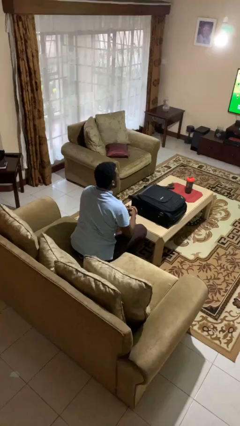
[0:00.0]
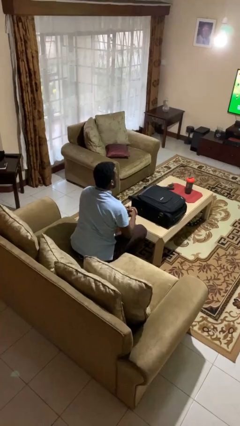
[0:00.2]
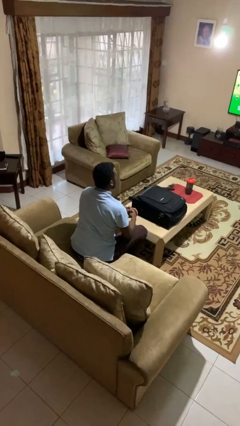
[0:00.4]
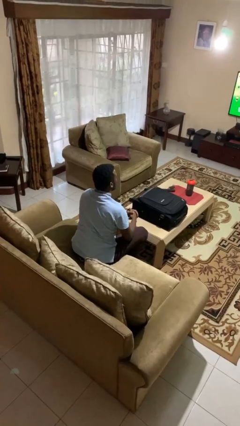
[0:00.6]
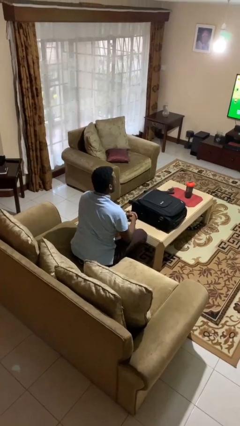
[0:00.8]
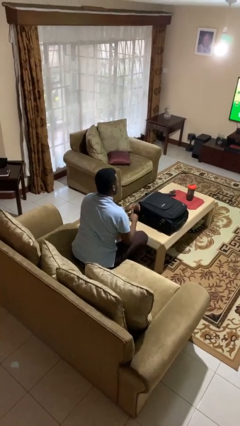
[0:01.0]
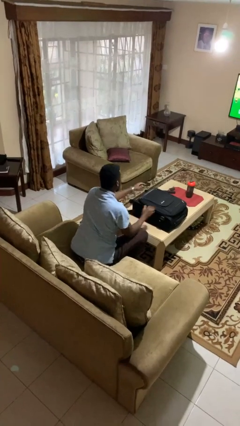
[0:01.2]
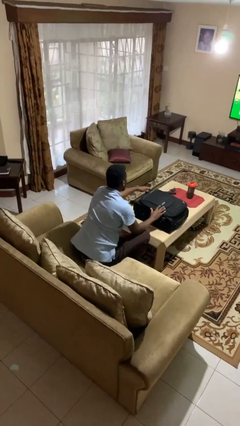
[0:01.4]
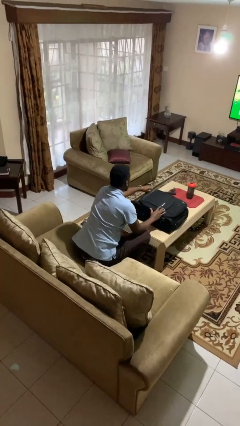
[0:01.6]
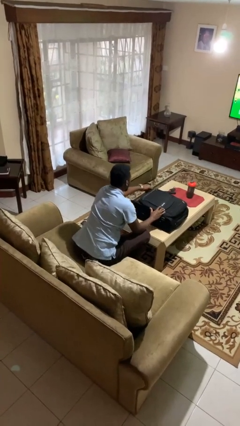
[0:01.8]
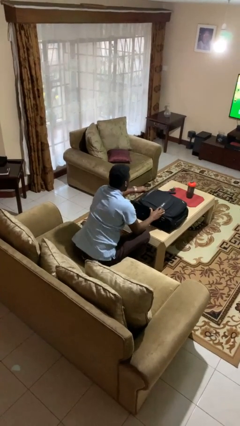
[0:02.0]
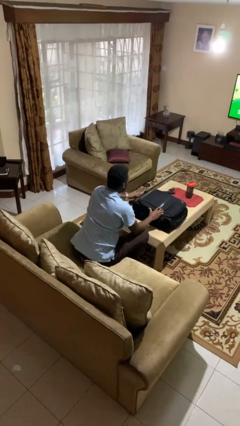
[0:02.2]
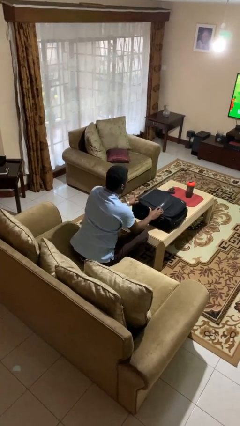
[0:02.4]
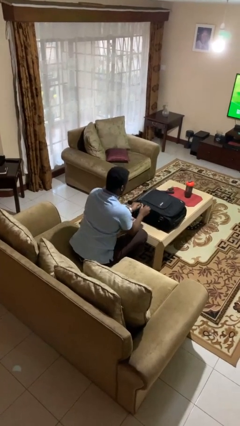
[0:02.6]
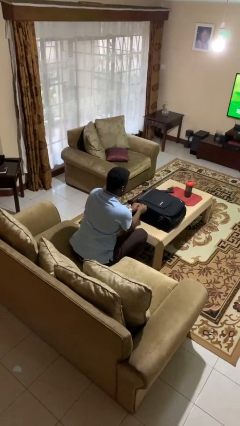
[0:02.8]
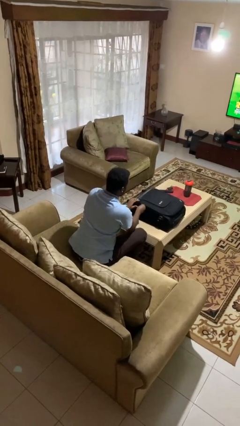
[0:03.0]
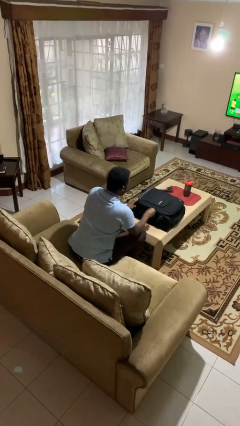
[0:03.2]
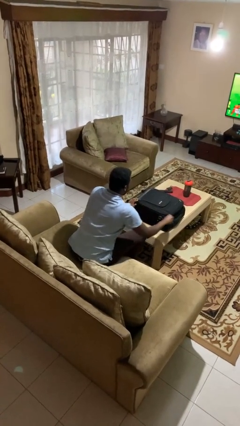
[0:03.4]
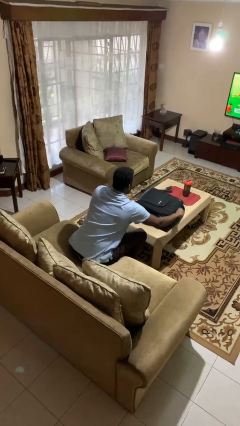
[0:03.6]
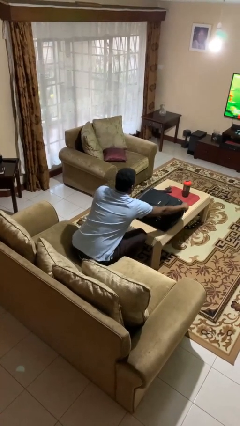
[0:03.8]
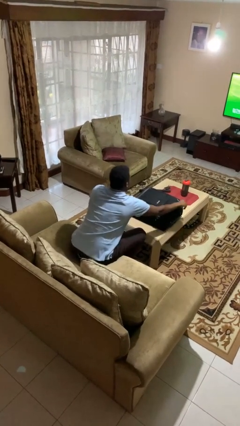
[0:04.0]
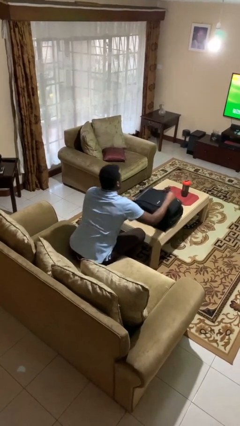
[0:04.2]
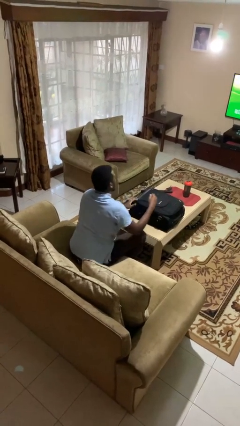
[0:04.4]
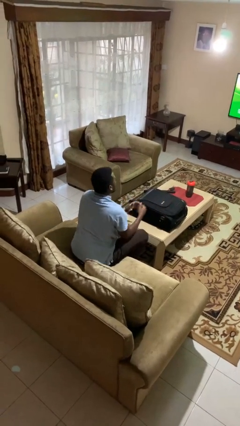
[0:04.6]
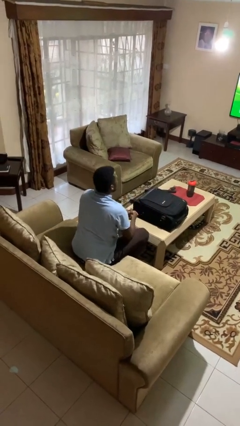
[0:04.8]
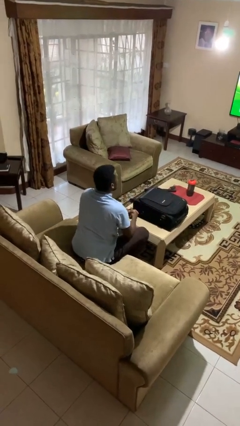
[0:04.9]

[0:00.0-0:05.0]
person closes suitcase

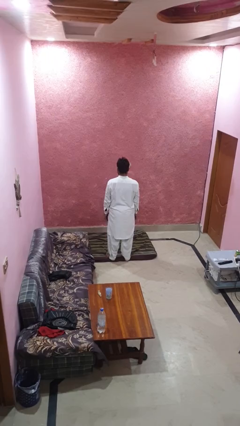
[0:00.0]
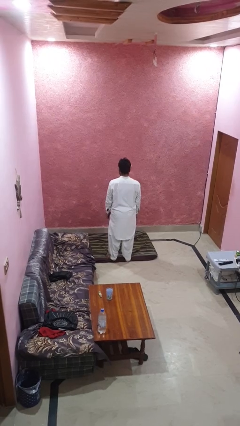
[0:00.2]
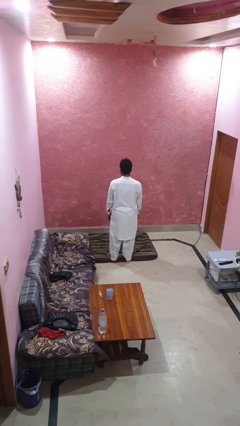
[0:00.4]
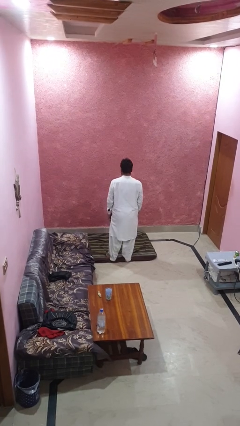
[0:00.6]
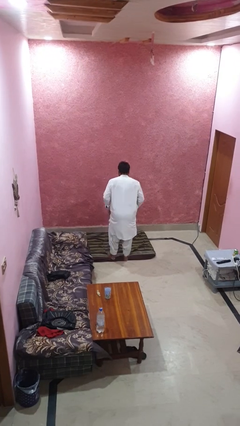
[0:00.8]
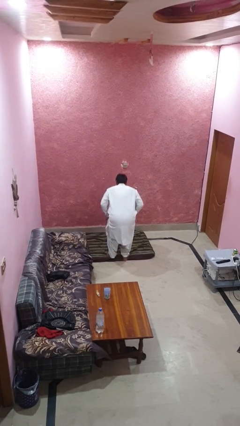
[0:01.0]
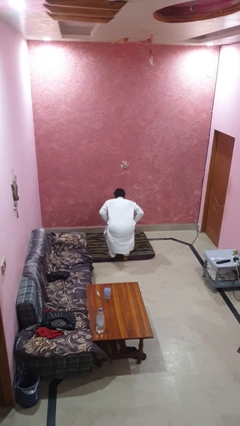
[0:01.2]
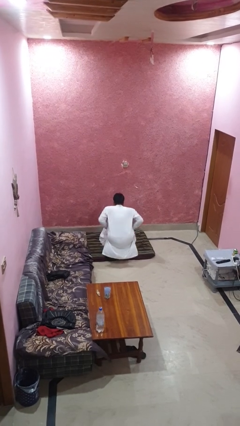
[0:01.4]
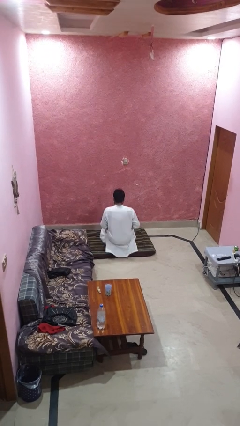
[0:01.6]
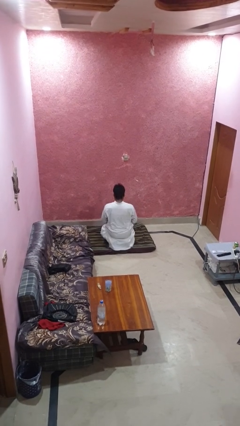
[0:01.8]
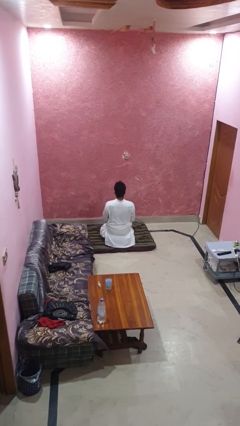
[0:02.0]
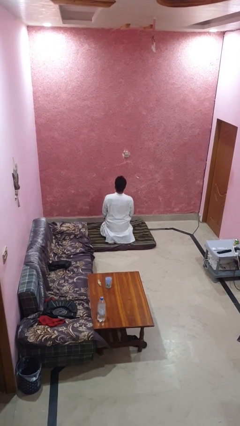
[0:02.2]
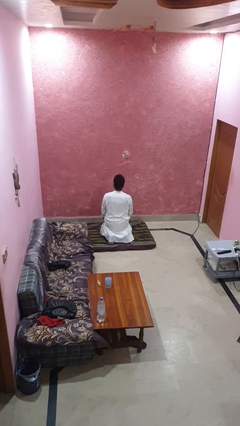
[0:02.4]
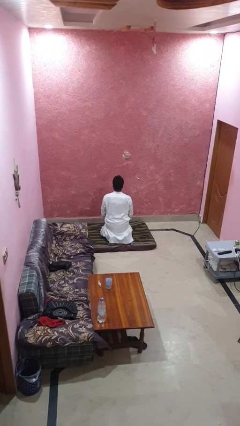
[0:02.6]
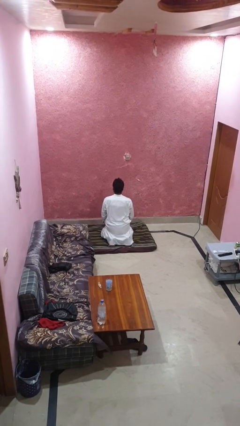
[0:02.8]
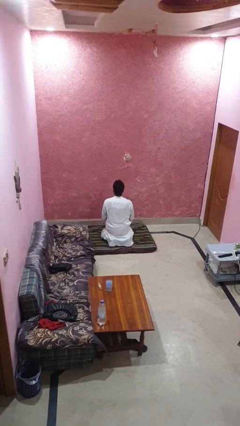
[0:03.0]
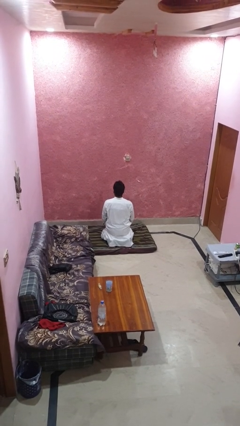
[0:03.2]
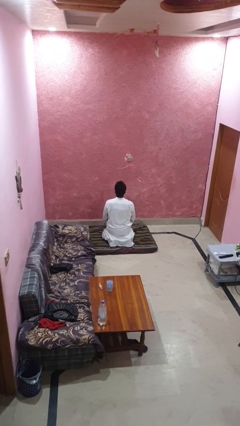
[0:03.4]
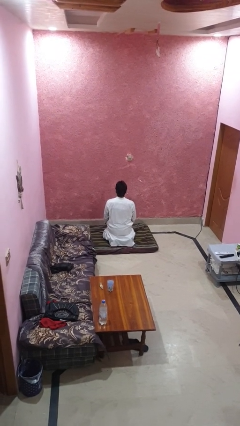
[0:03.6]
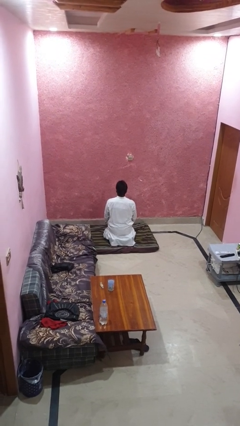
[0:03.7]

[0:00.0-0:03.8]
person kneels

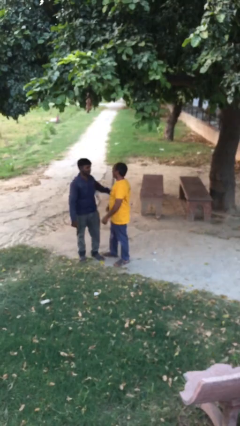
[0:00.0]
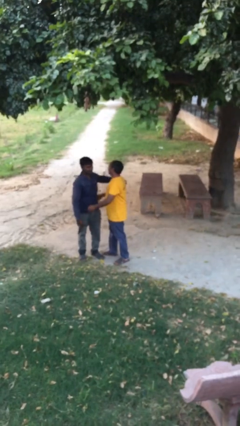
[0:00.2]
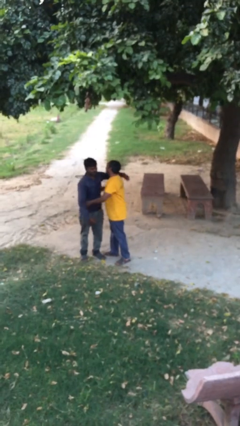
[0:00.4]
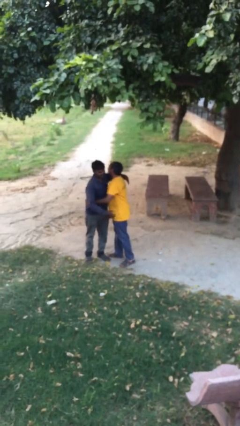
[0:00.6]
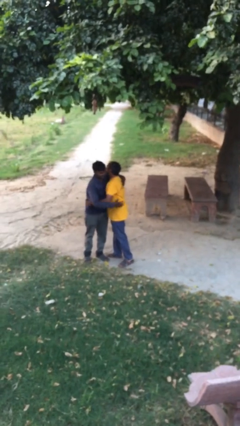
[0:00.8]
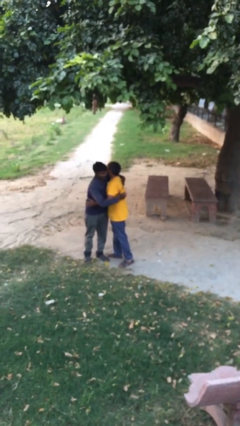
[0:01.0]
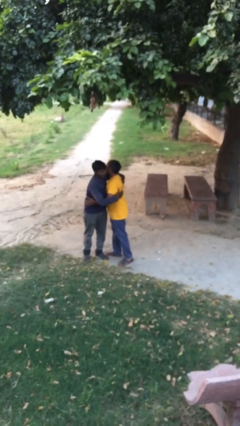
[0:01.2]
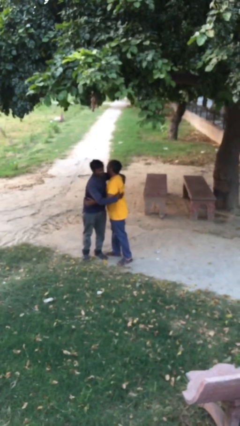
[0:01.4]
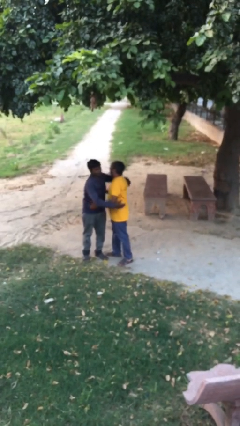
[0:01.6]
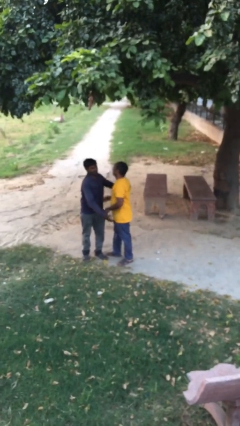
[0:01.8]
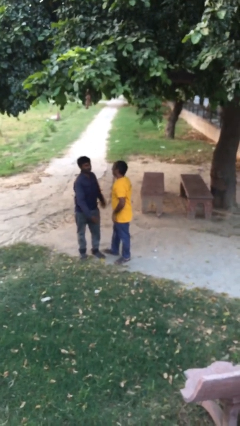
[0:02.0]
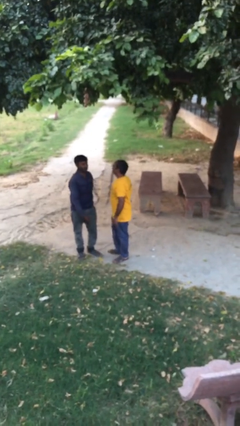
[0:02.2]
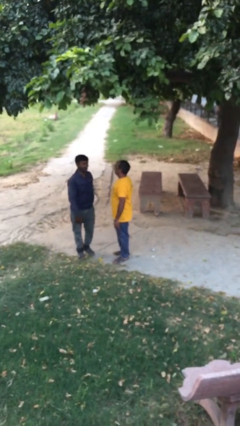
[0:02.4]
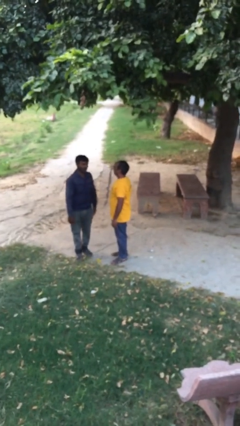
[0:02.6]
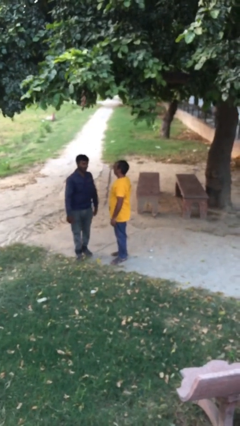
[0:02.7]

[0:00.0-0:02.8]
person embraces person

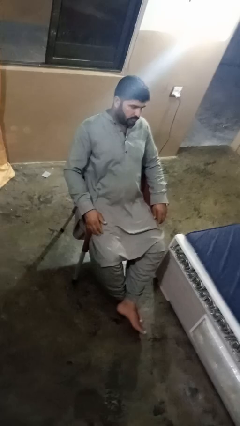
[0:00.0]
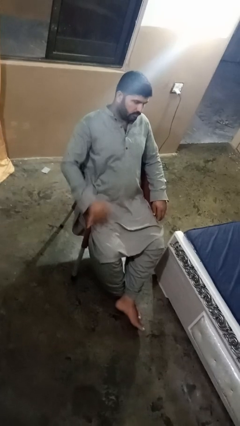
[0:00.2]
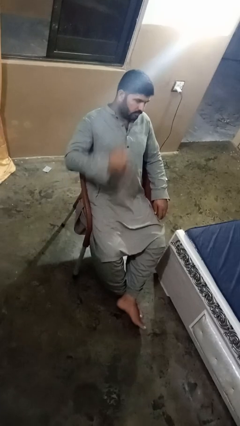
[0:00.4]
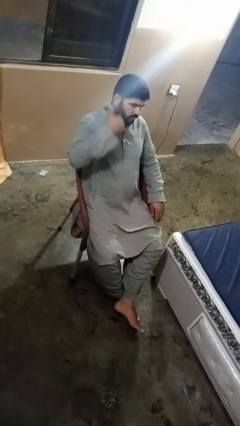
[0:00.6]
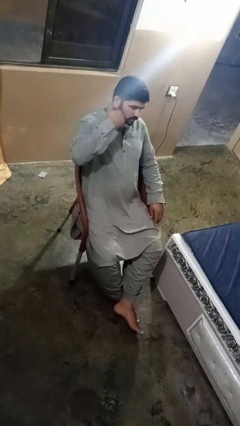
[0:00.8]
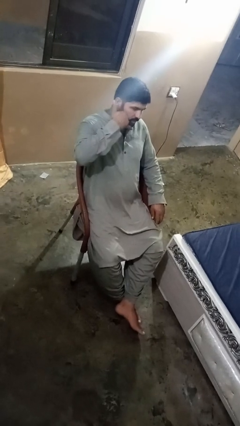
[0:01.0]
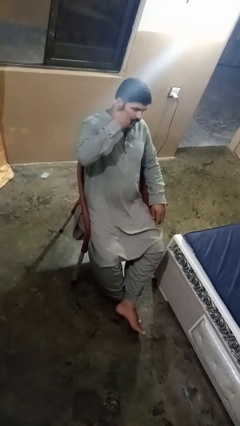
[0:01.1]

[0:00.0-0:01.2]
person gestures call me

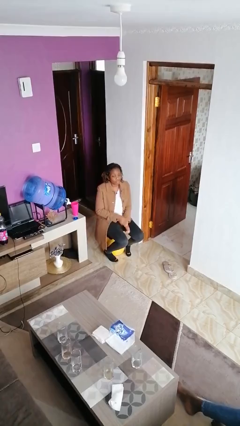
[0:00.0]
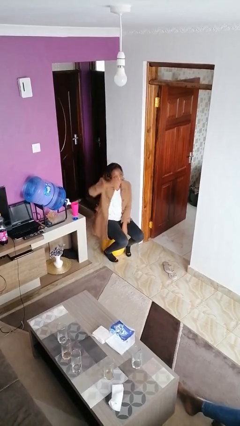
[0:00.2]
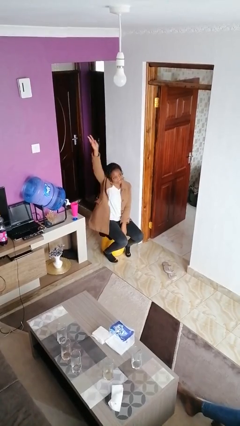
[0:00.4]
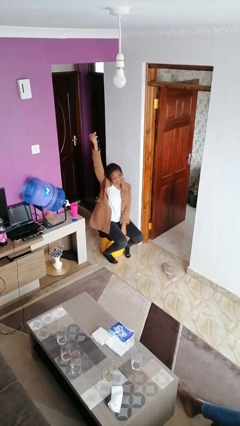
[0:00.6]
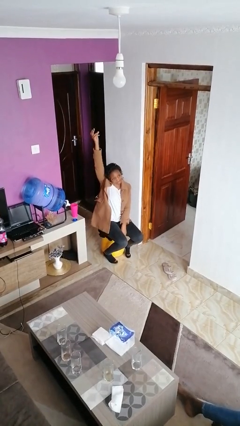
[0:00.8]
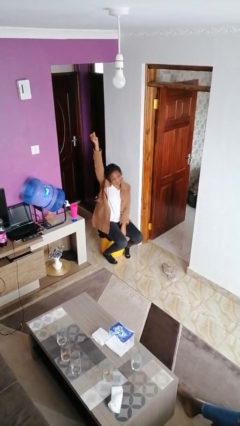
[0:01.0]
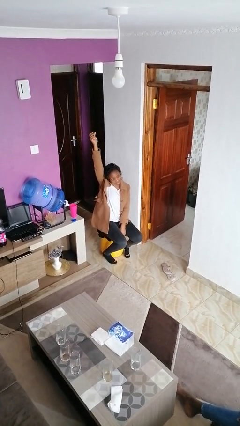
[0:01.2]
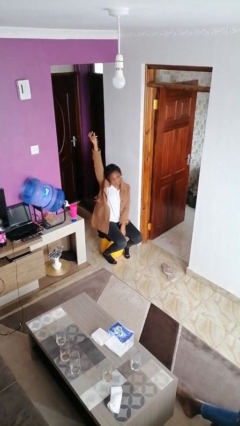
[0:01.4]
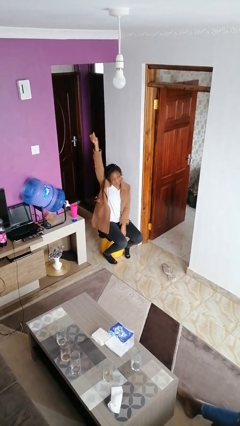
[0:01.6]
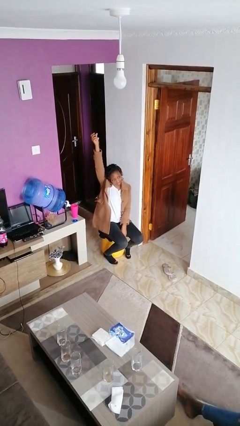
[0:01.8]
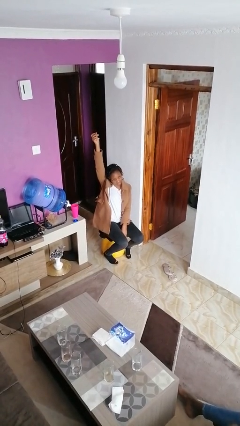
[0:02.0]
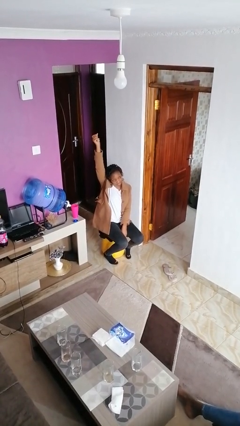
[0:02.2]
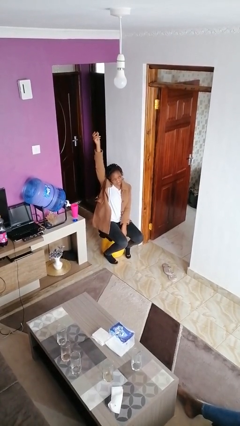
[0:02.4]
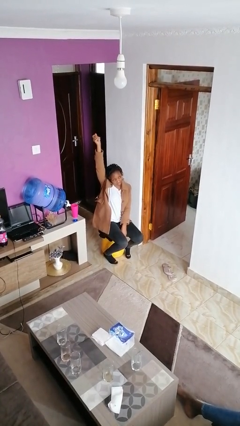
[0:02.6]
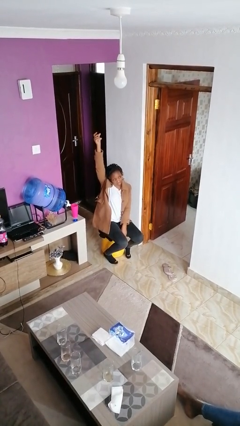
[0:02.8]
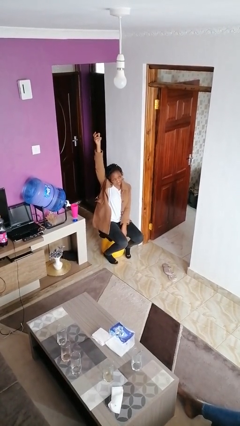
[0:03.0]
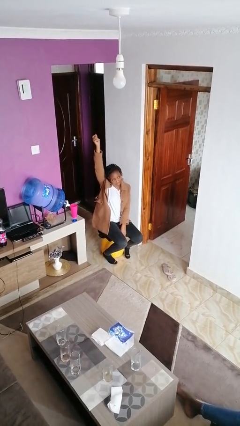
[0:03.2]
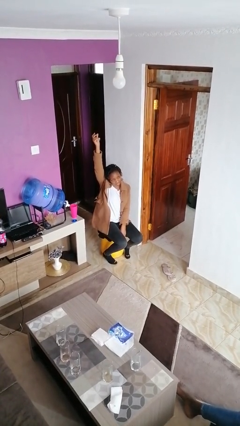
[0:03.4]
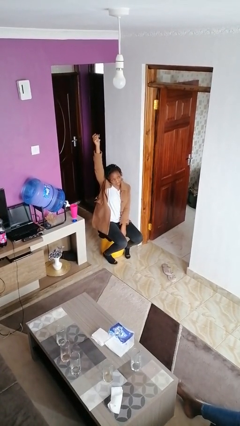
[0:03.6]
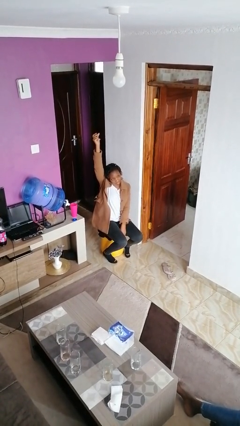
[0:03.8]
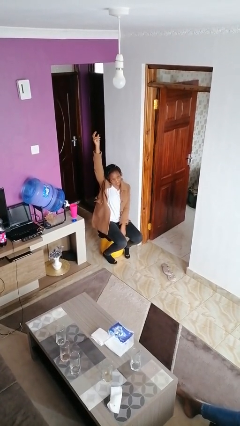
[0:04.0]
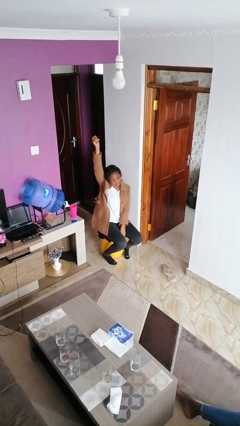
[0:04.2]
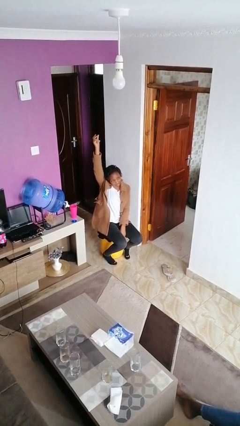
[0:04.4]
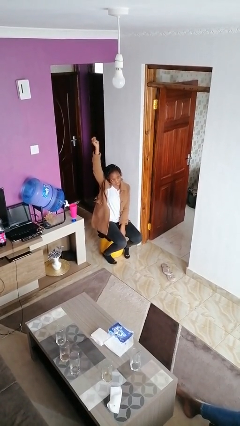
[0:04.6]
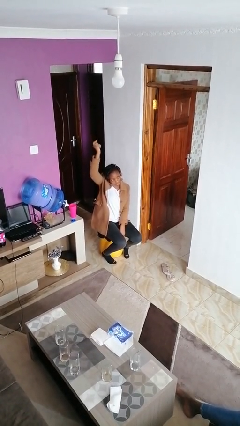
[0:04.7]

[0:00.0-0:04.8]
person gestures raise hand
